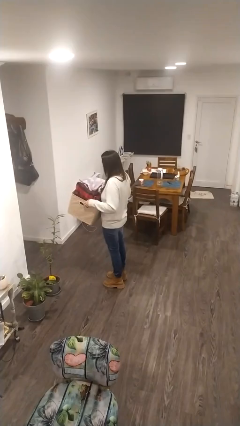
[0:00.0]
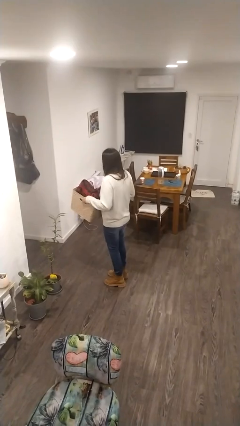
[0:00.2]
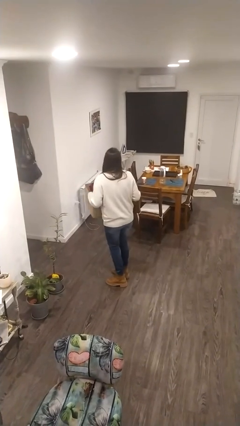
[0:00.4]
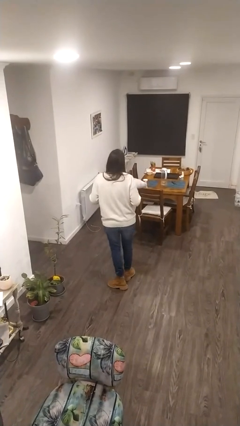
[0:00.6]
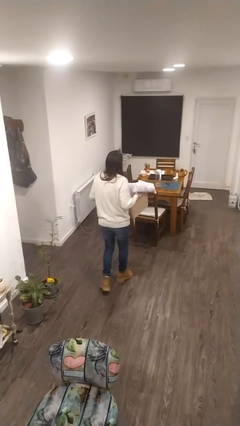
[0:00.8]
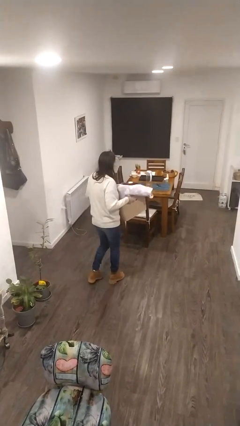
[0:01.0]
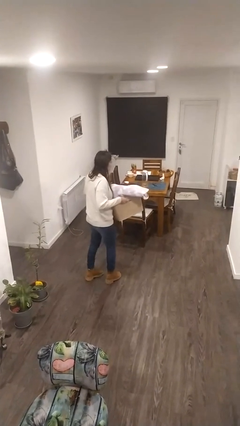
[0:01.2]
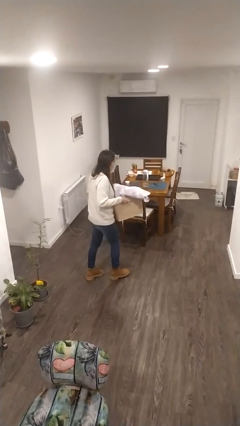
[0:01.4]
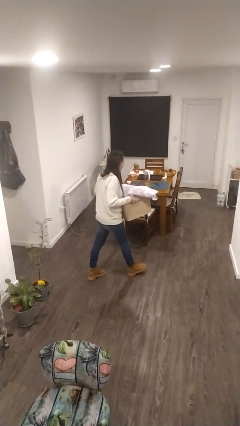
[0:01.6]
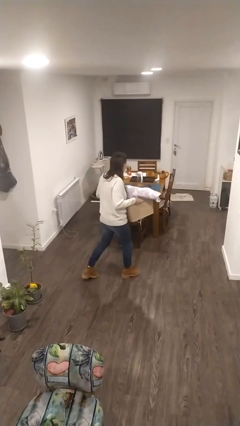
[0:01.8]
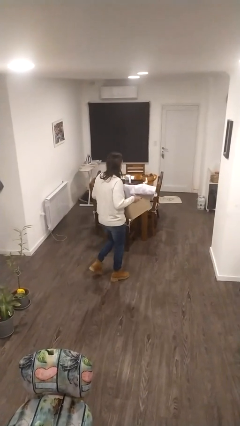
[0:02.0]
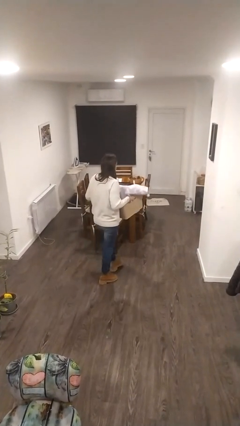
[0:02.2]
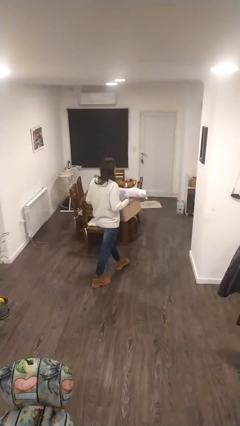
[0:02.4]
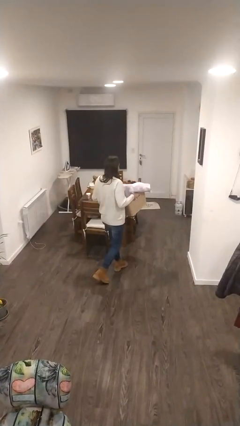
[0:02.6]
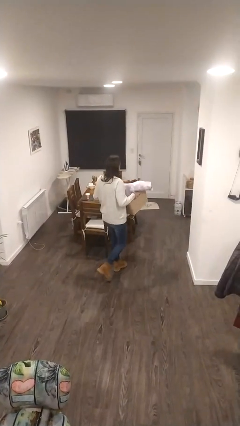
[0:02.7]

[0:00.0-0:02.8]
person carries laundry basket

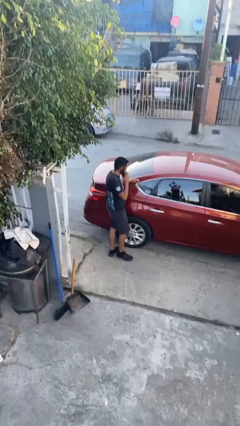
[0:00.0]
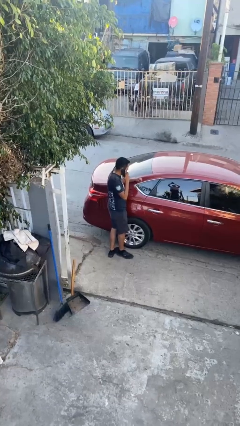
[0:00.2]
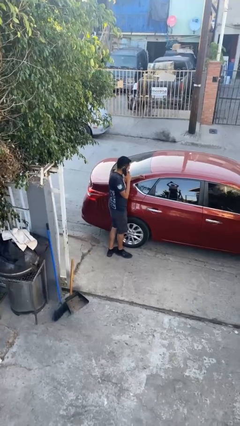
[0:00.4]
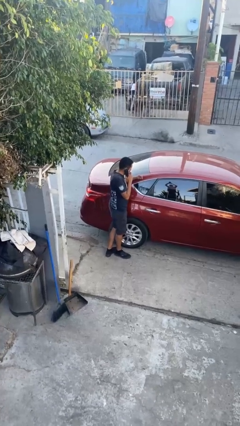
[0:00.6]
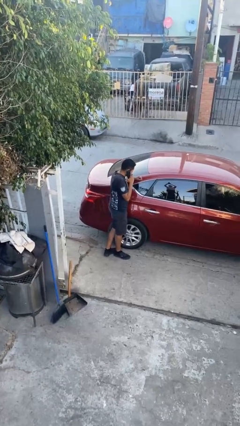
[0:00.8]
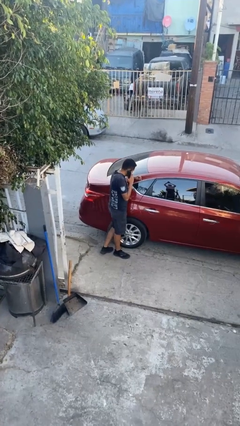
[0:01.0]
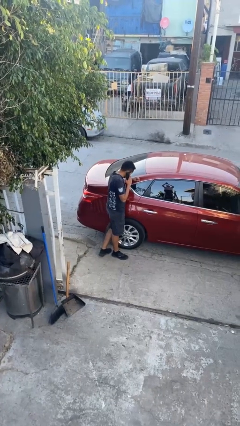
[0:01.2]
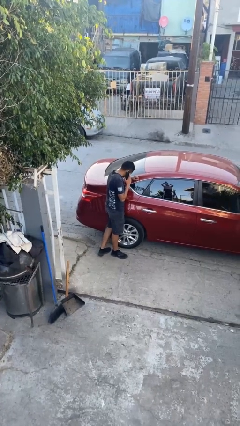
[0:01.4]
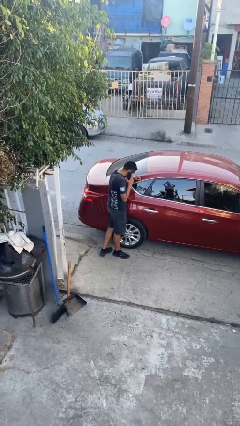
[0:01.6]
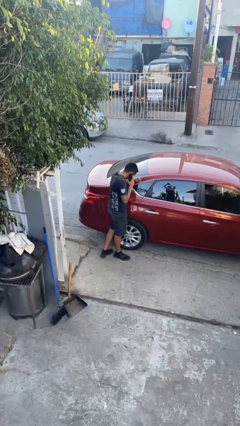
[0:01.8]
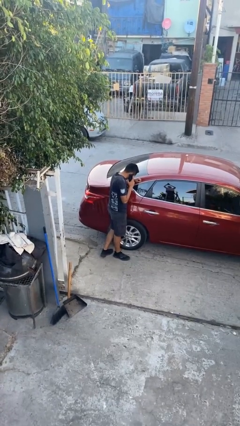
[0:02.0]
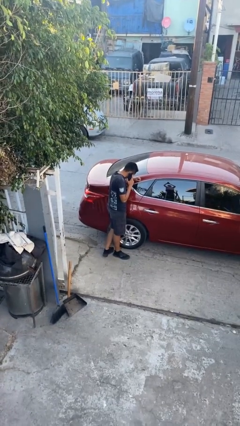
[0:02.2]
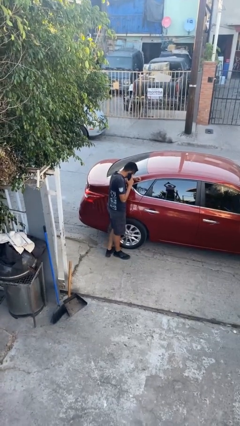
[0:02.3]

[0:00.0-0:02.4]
person leans against car

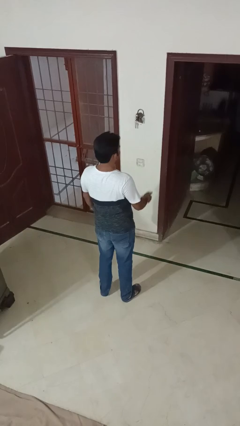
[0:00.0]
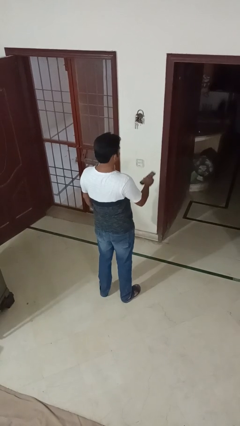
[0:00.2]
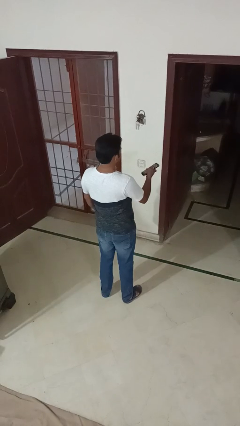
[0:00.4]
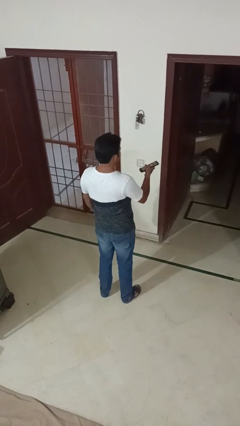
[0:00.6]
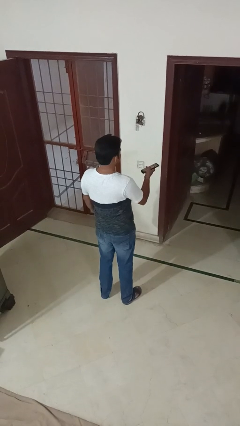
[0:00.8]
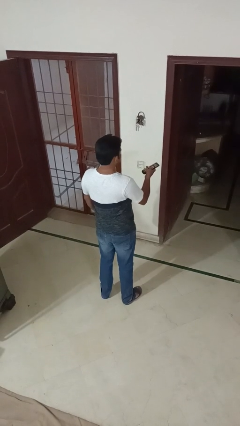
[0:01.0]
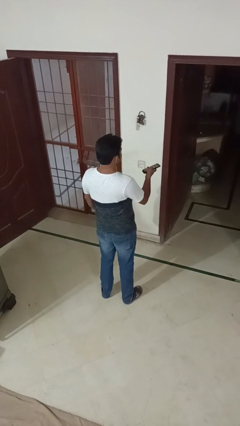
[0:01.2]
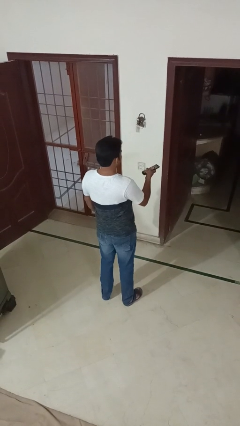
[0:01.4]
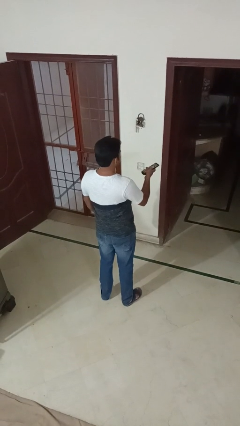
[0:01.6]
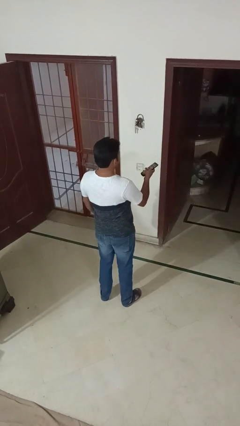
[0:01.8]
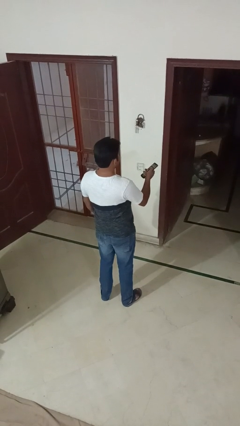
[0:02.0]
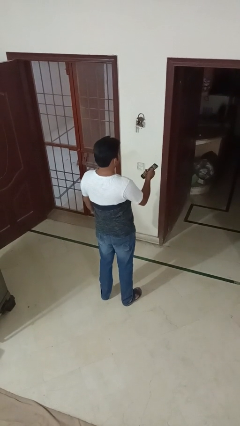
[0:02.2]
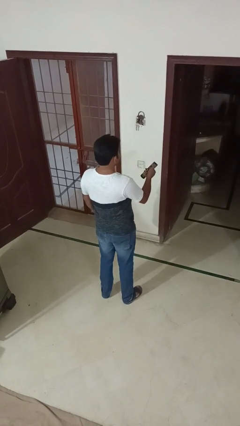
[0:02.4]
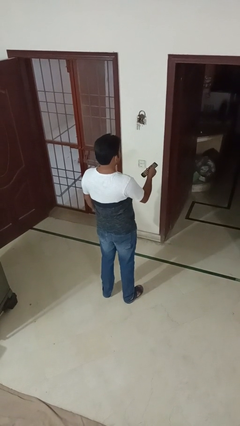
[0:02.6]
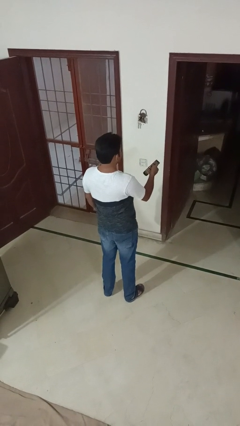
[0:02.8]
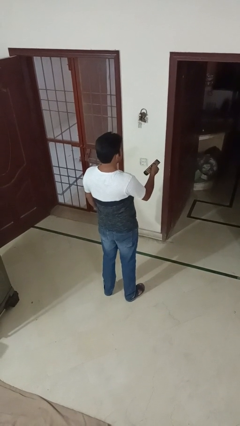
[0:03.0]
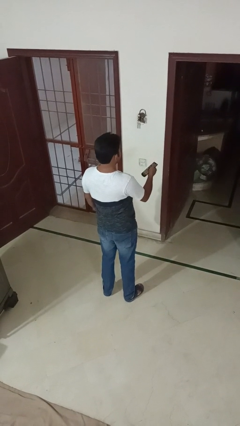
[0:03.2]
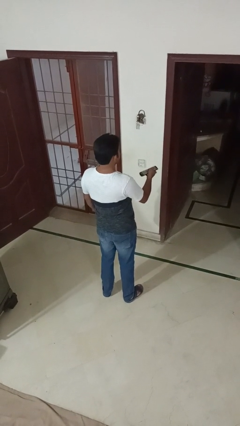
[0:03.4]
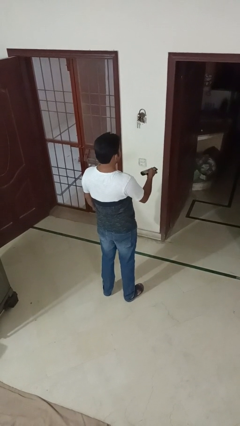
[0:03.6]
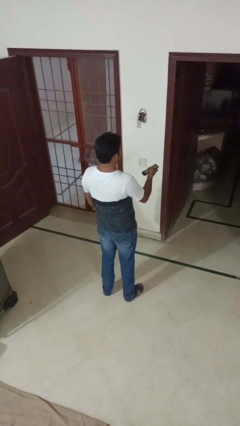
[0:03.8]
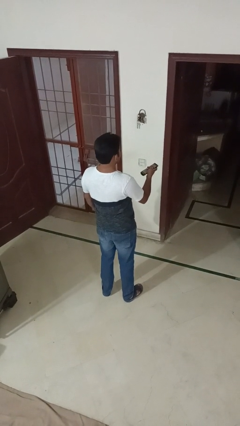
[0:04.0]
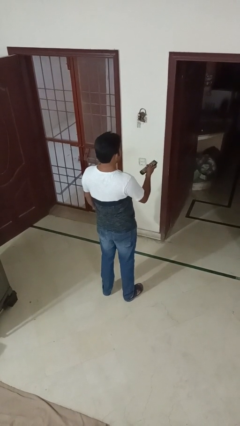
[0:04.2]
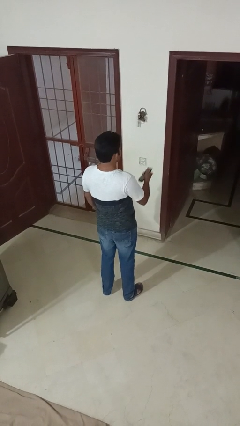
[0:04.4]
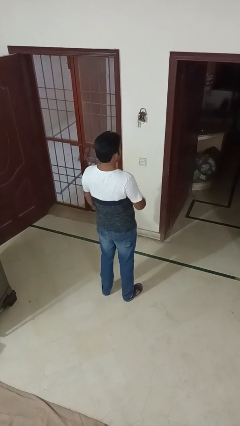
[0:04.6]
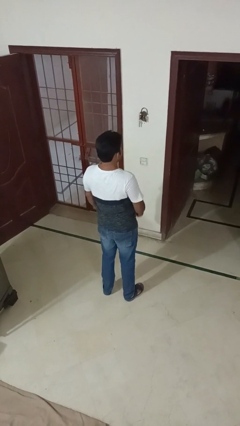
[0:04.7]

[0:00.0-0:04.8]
person uses television remote

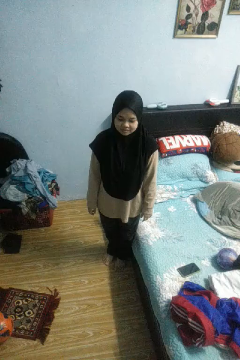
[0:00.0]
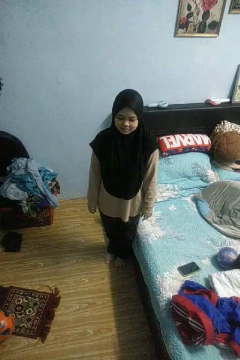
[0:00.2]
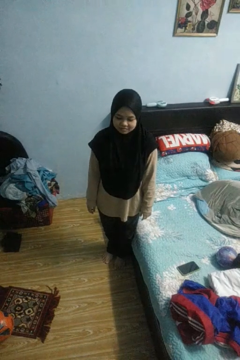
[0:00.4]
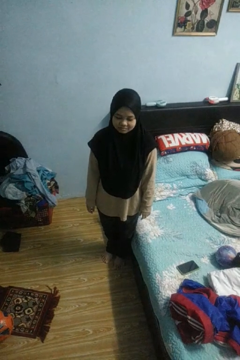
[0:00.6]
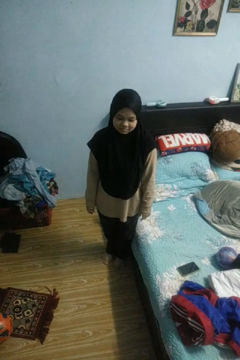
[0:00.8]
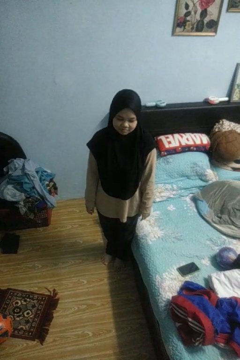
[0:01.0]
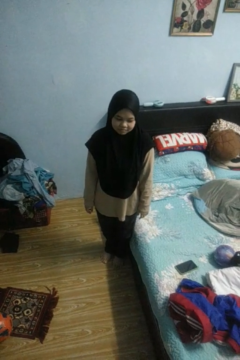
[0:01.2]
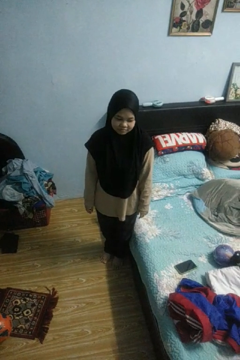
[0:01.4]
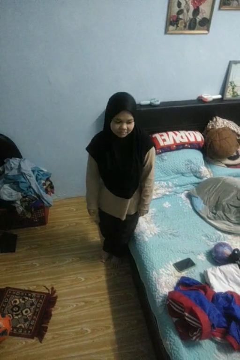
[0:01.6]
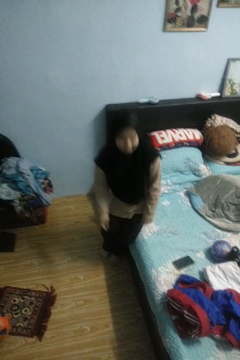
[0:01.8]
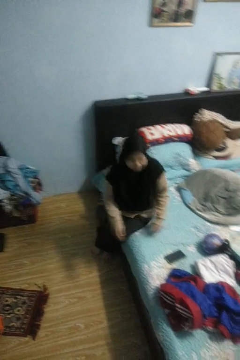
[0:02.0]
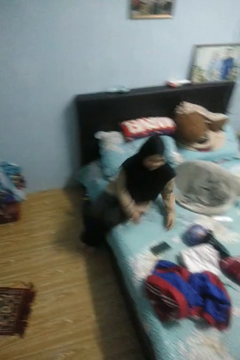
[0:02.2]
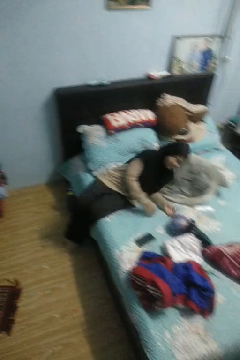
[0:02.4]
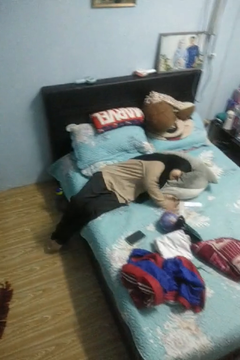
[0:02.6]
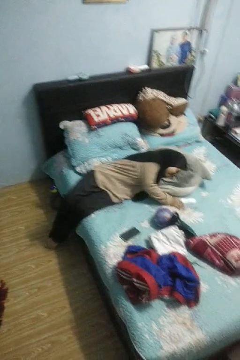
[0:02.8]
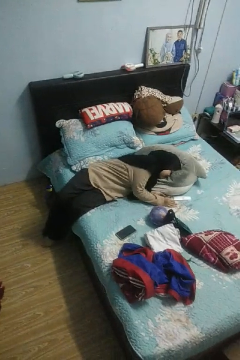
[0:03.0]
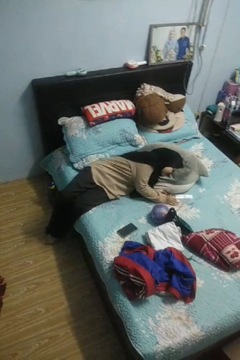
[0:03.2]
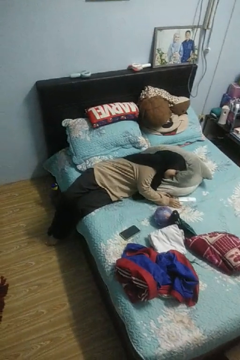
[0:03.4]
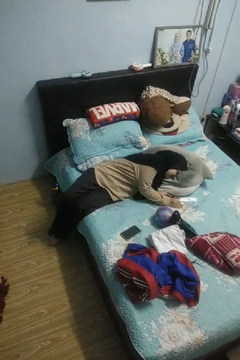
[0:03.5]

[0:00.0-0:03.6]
person lies down on bed

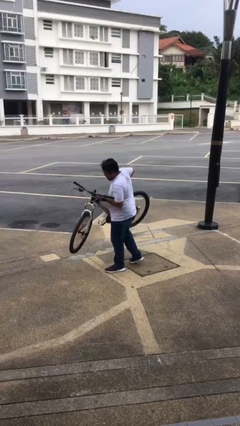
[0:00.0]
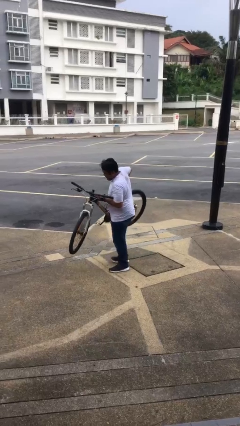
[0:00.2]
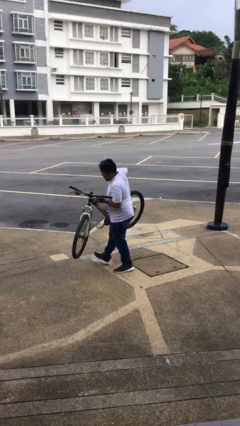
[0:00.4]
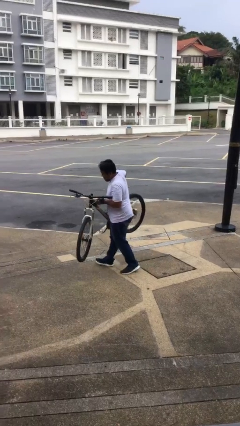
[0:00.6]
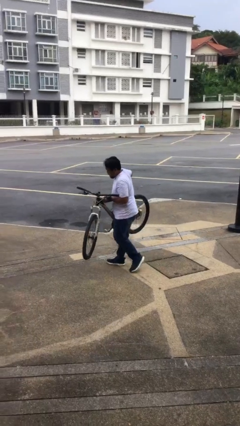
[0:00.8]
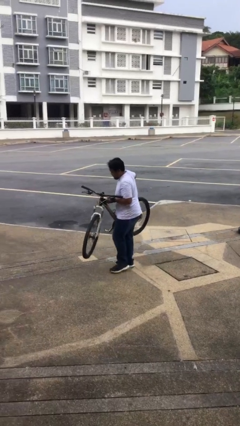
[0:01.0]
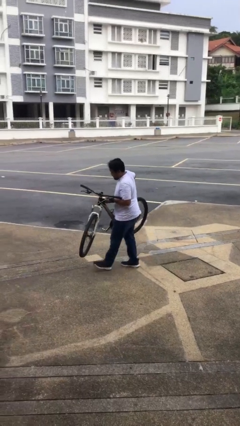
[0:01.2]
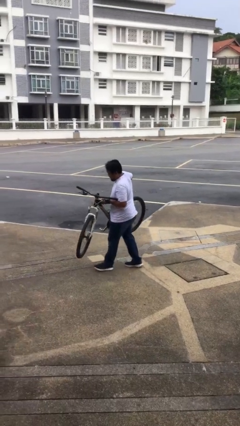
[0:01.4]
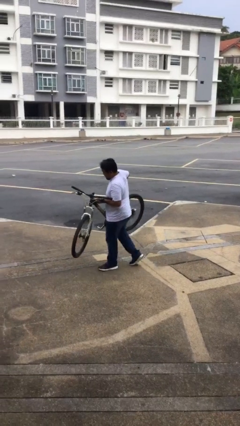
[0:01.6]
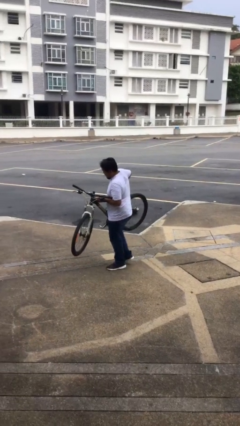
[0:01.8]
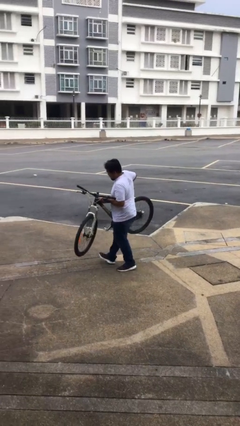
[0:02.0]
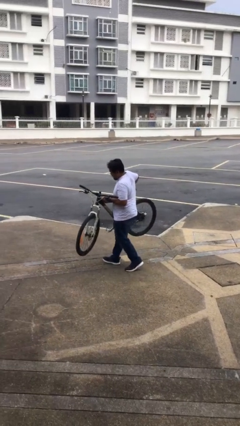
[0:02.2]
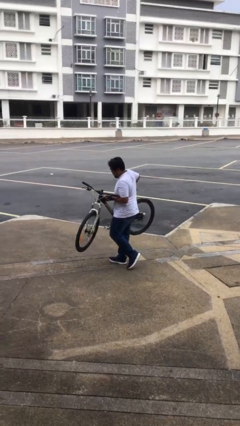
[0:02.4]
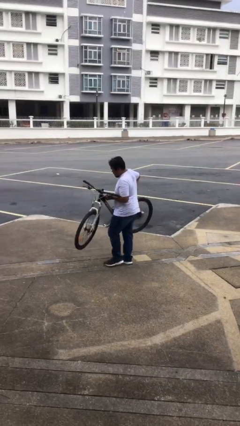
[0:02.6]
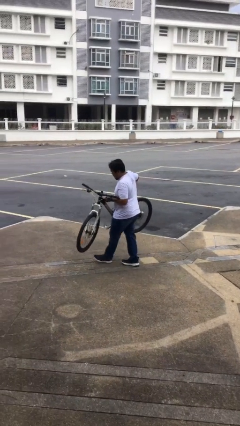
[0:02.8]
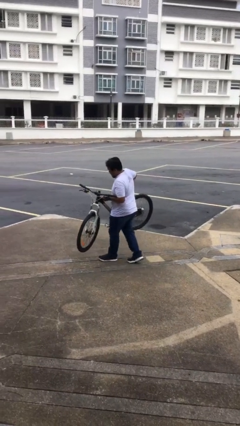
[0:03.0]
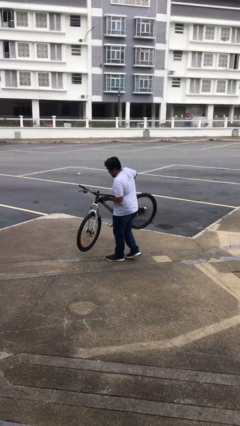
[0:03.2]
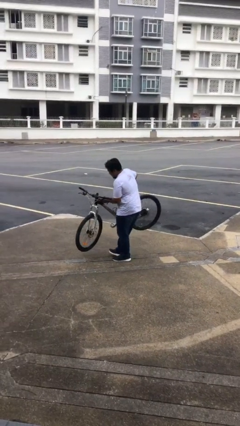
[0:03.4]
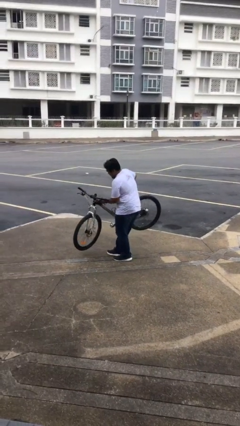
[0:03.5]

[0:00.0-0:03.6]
person carries heavy object

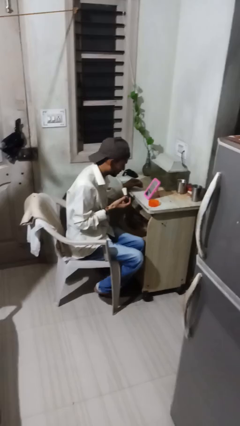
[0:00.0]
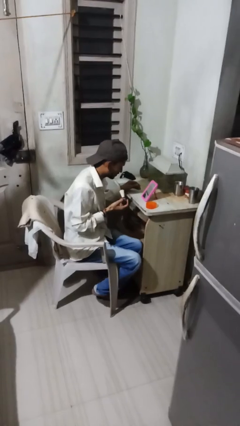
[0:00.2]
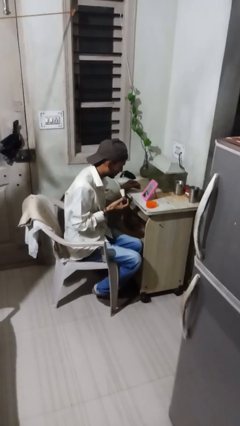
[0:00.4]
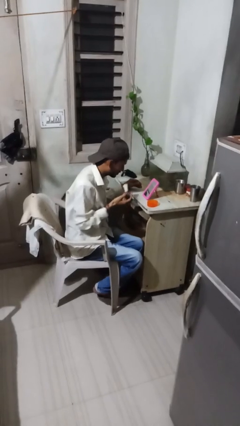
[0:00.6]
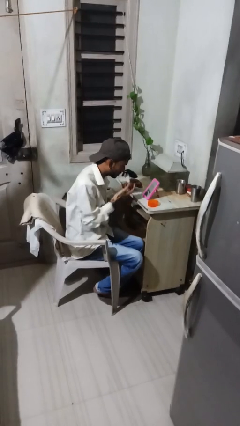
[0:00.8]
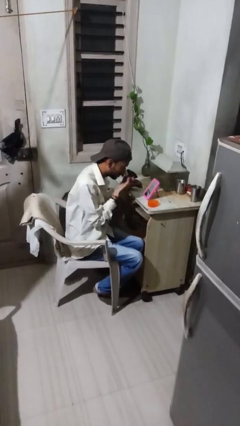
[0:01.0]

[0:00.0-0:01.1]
person applies foundation makeup
